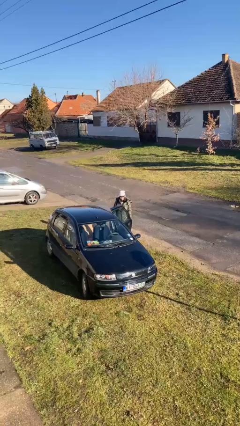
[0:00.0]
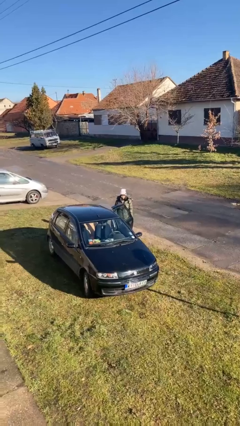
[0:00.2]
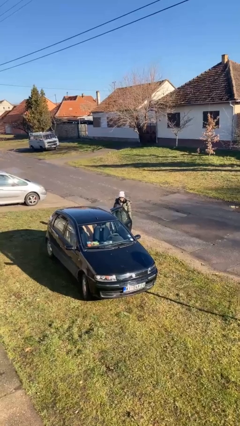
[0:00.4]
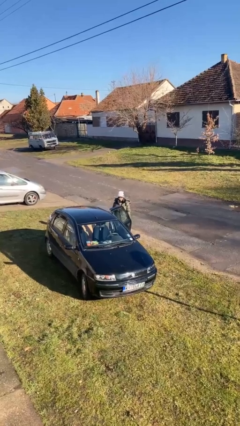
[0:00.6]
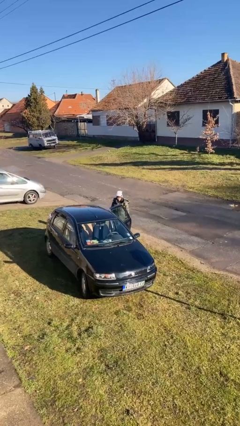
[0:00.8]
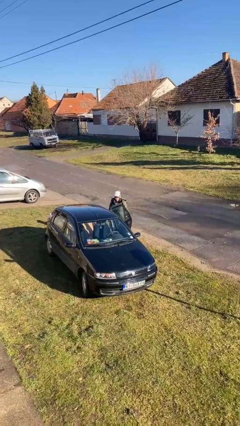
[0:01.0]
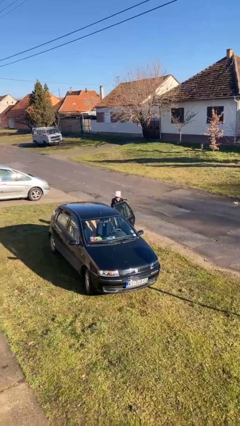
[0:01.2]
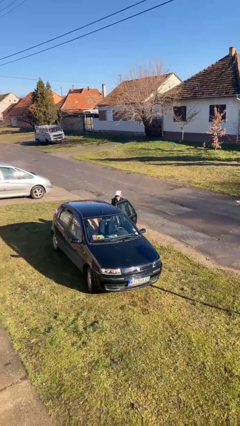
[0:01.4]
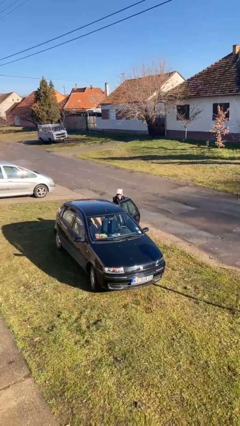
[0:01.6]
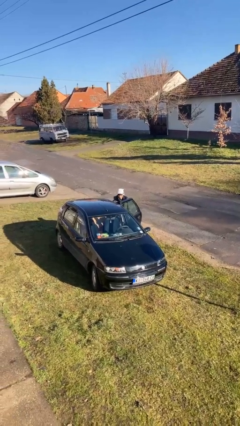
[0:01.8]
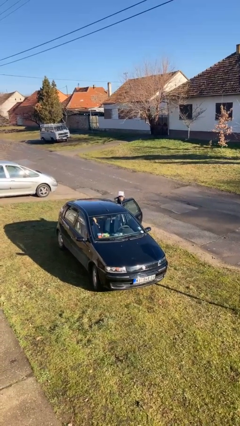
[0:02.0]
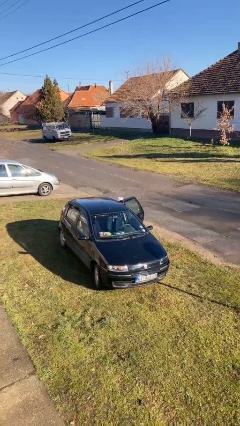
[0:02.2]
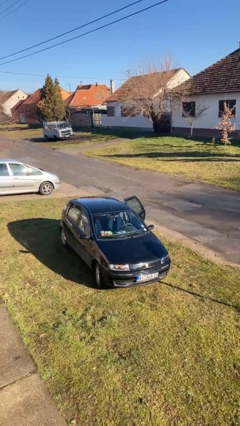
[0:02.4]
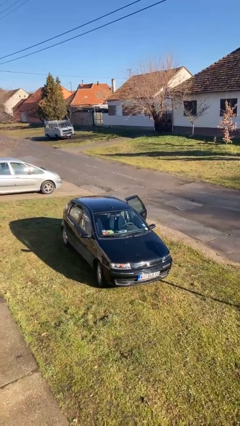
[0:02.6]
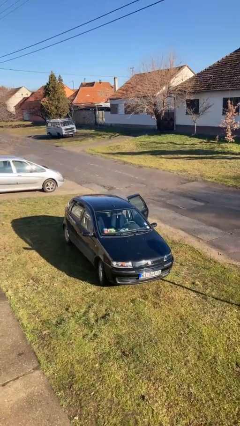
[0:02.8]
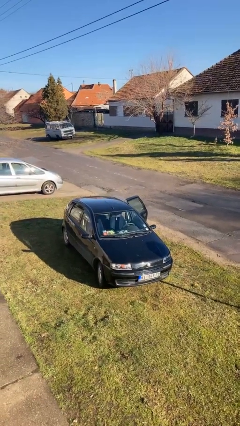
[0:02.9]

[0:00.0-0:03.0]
person enters car

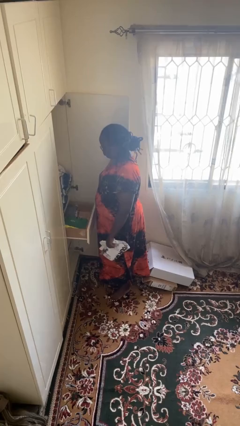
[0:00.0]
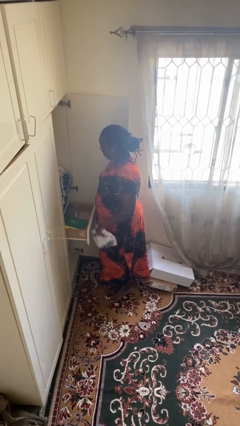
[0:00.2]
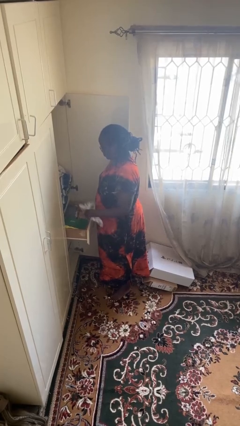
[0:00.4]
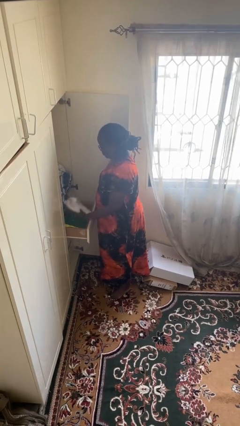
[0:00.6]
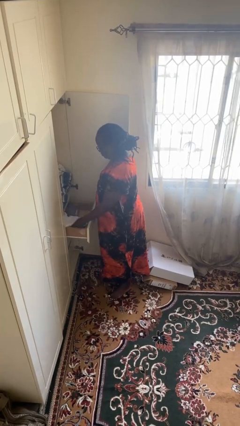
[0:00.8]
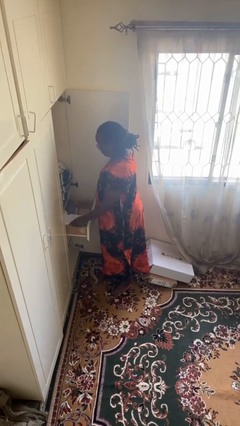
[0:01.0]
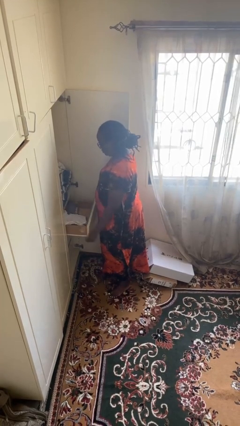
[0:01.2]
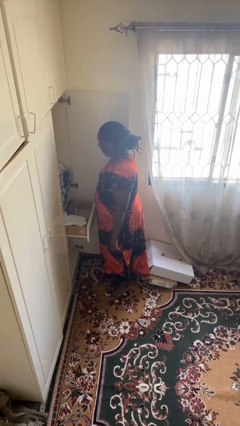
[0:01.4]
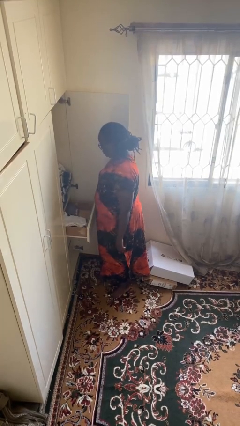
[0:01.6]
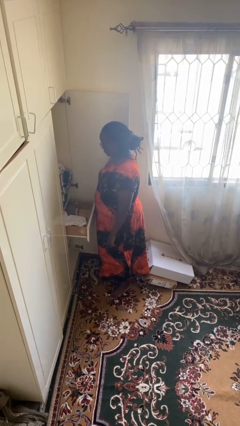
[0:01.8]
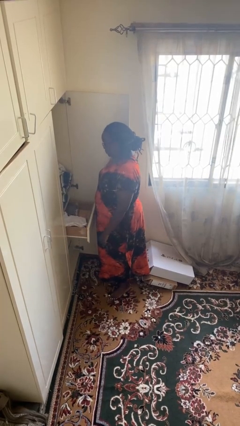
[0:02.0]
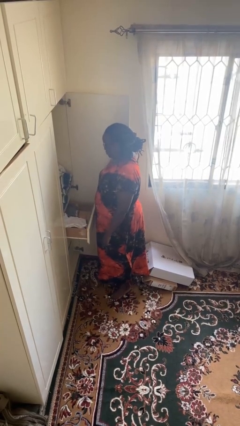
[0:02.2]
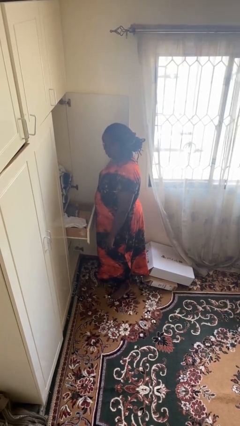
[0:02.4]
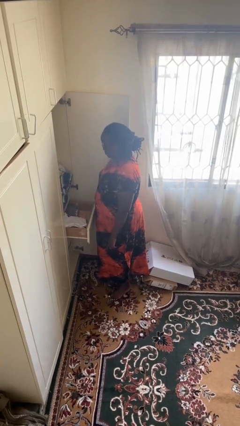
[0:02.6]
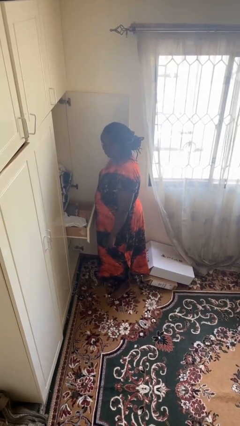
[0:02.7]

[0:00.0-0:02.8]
person puts clothes into dresser

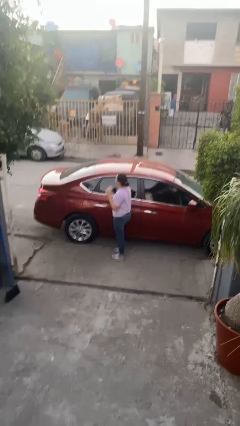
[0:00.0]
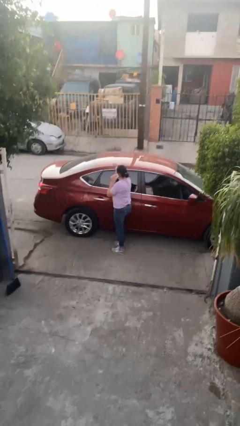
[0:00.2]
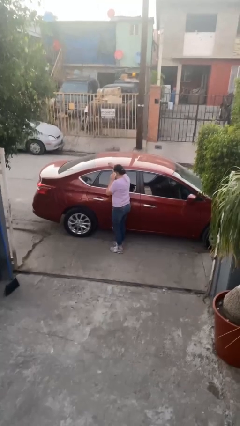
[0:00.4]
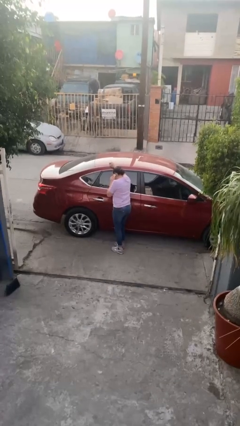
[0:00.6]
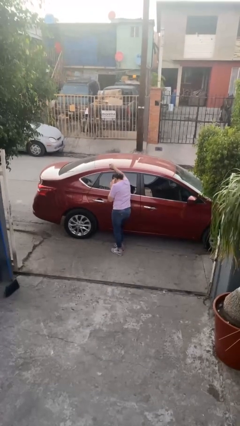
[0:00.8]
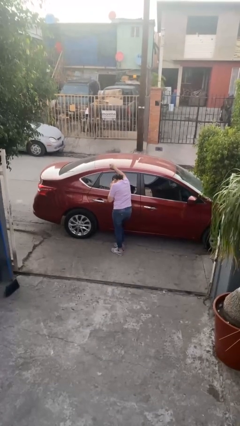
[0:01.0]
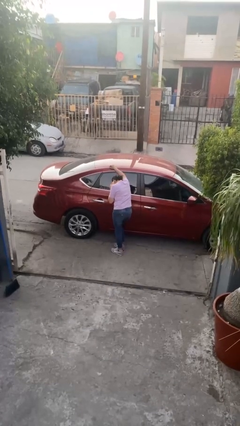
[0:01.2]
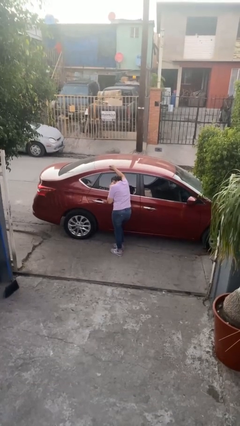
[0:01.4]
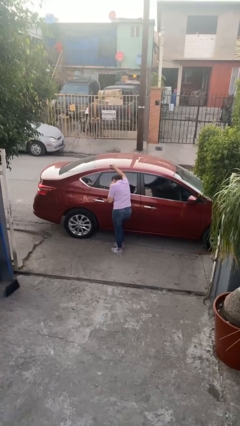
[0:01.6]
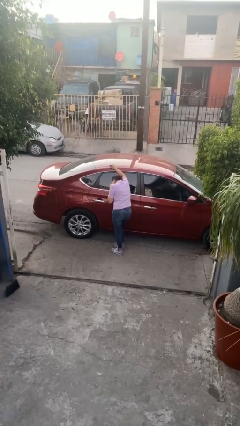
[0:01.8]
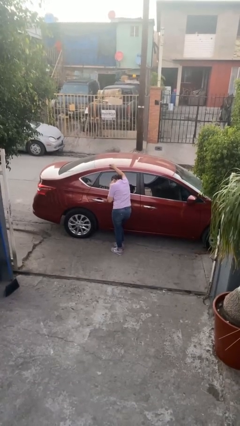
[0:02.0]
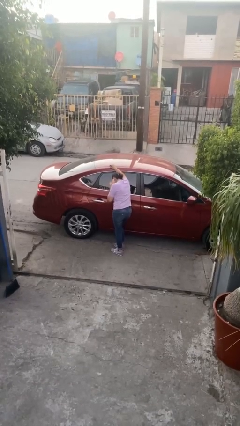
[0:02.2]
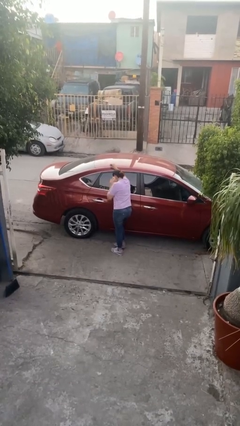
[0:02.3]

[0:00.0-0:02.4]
person leans against car

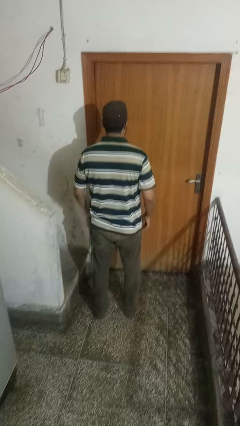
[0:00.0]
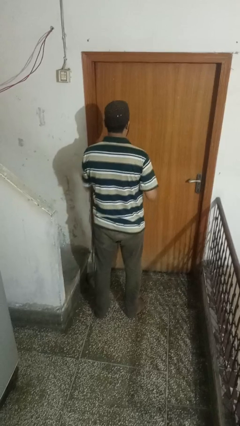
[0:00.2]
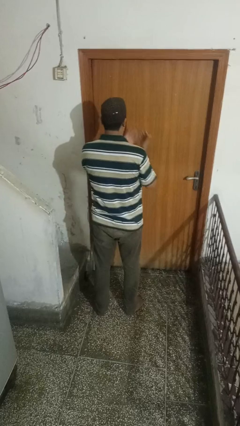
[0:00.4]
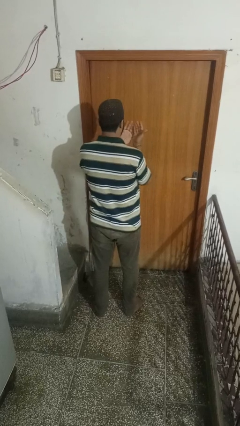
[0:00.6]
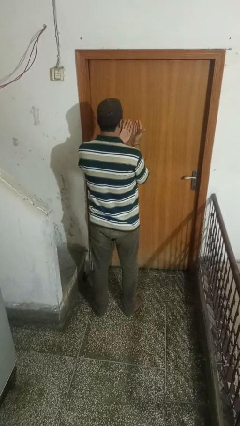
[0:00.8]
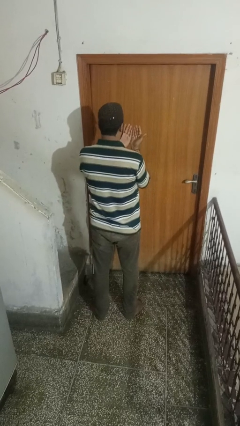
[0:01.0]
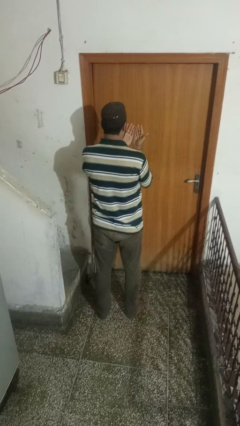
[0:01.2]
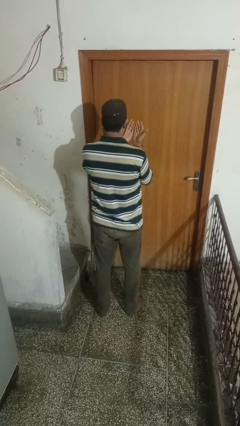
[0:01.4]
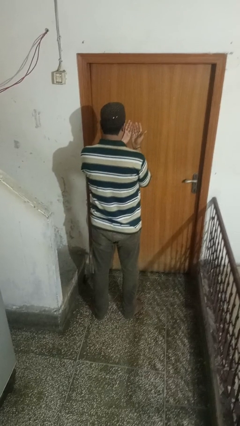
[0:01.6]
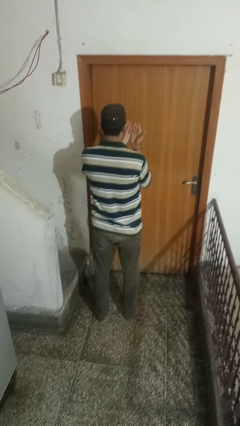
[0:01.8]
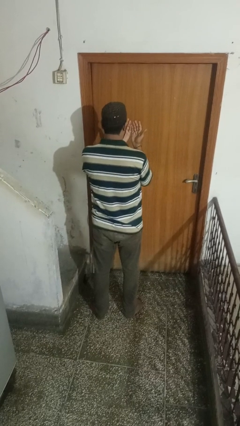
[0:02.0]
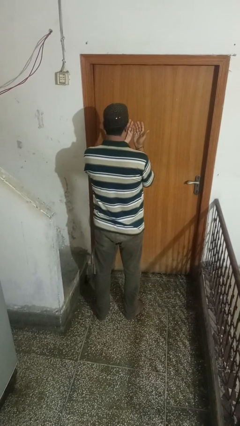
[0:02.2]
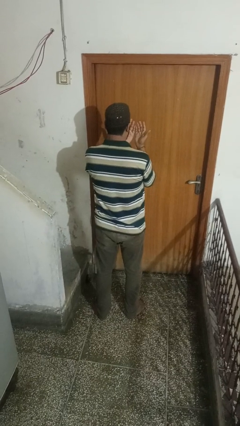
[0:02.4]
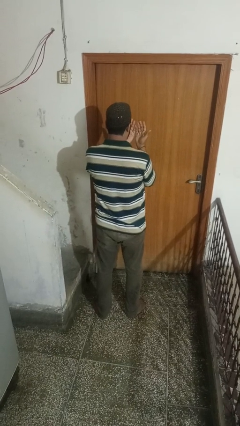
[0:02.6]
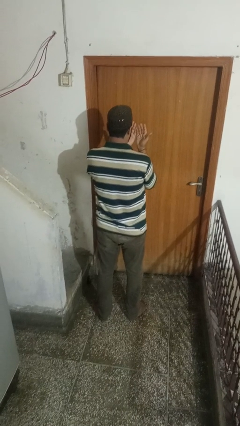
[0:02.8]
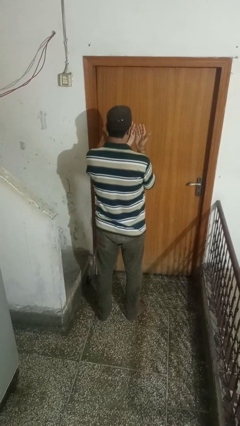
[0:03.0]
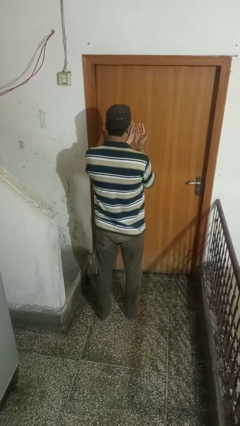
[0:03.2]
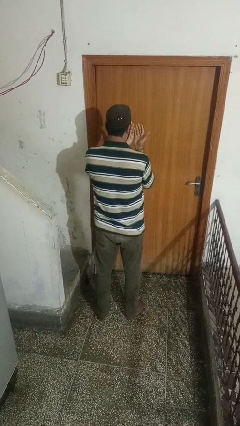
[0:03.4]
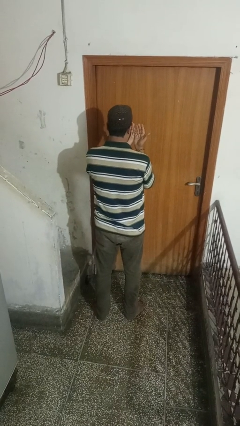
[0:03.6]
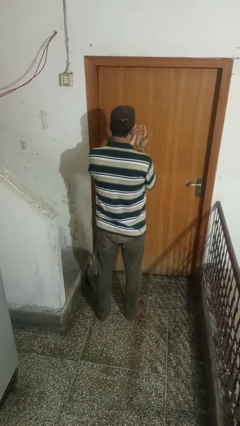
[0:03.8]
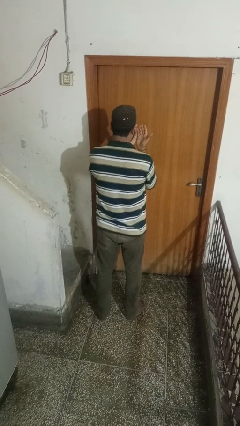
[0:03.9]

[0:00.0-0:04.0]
person prays

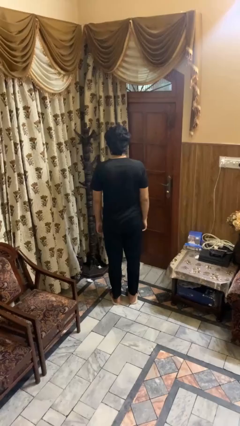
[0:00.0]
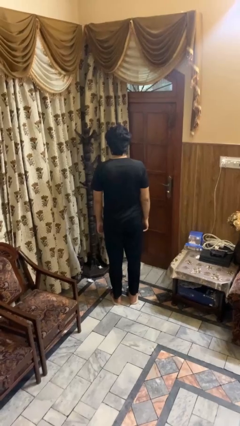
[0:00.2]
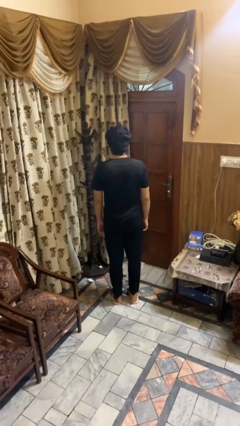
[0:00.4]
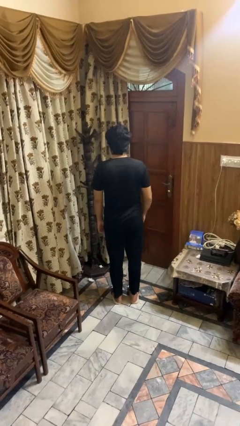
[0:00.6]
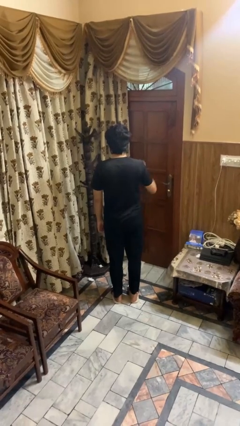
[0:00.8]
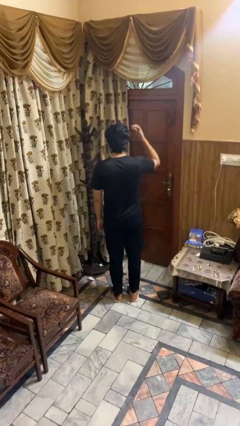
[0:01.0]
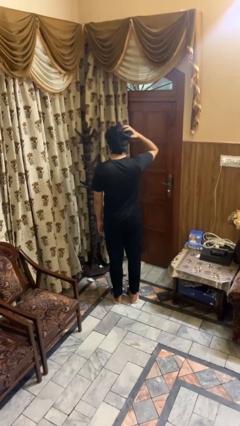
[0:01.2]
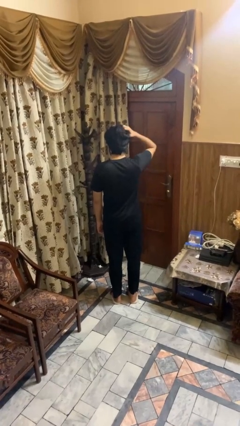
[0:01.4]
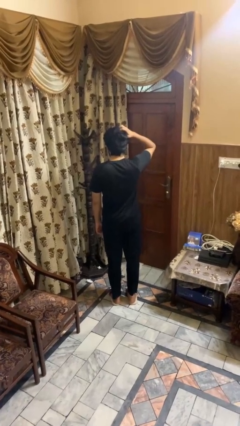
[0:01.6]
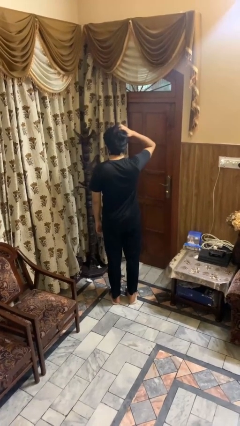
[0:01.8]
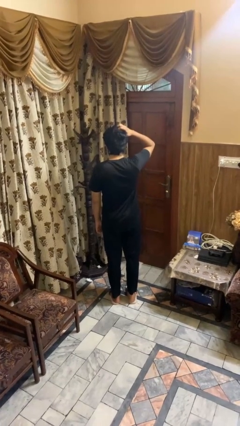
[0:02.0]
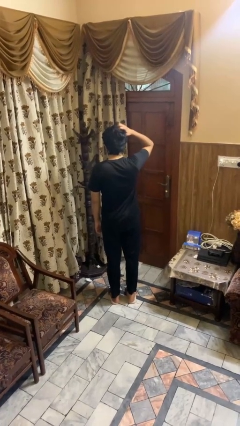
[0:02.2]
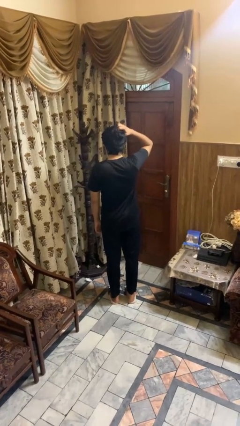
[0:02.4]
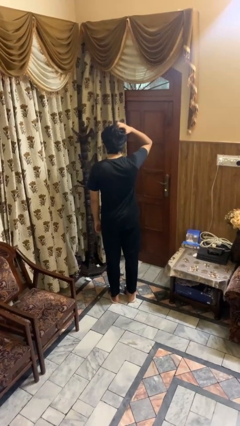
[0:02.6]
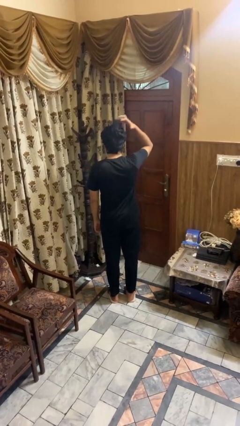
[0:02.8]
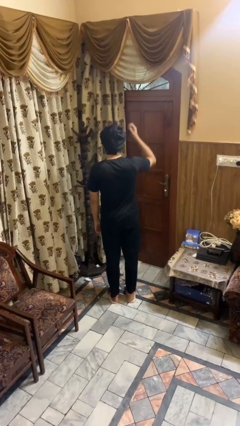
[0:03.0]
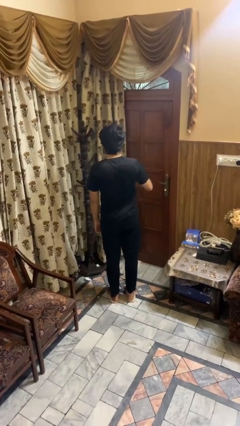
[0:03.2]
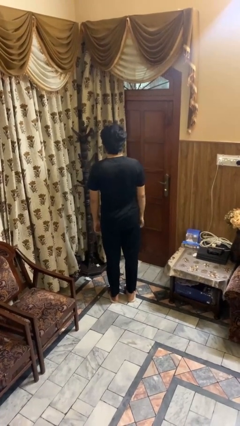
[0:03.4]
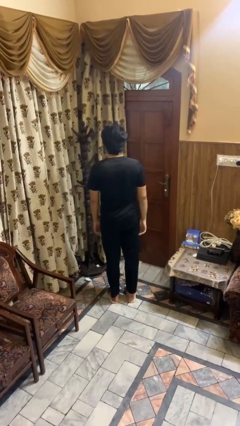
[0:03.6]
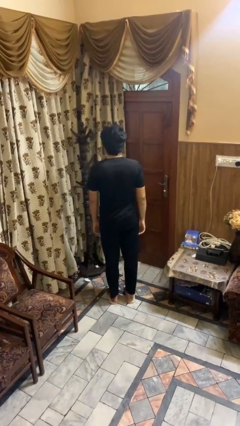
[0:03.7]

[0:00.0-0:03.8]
person scratches face

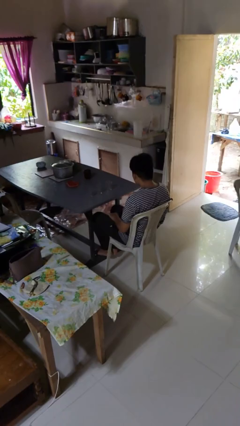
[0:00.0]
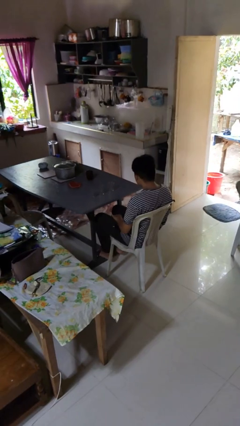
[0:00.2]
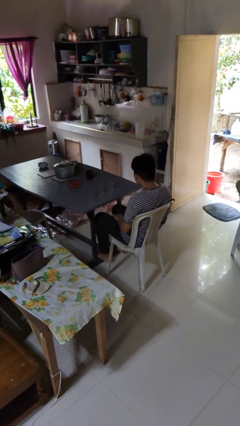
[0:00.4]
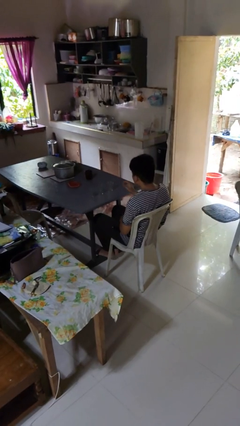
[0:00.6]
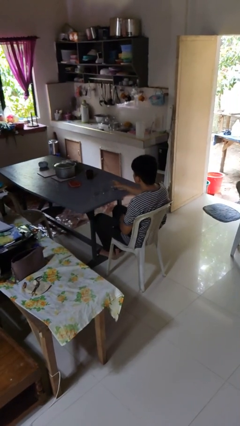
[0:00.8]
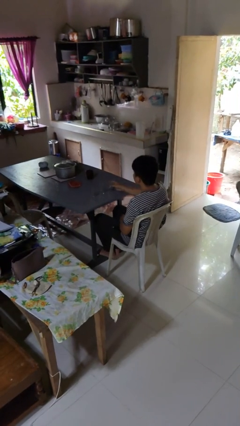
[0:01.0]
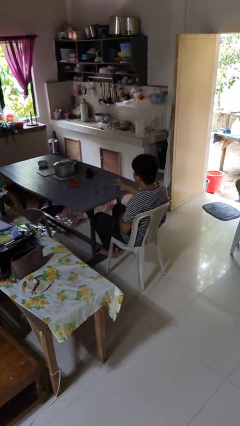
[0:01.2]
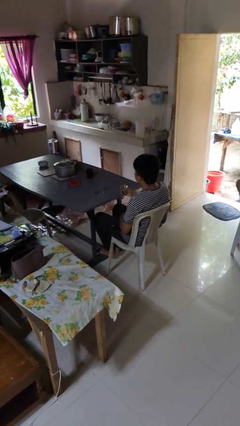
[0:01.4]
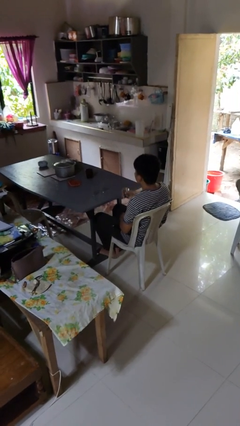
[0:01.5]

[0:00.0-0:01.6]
person picks up object from table
